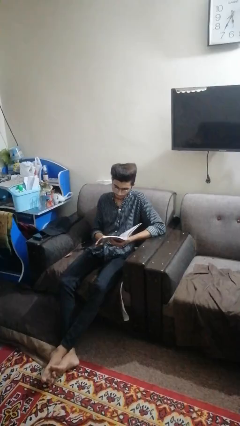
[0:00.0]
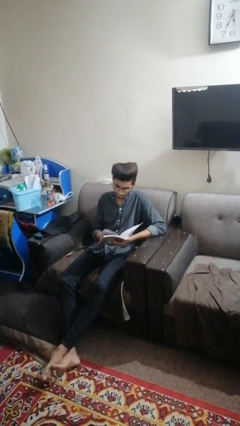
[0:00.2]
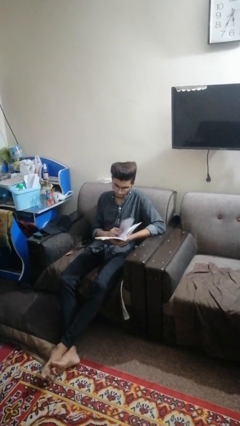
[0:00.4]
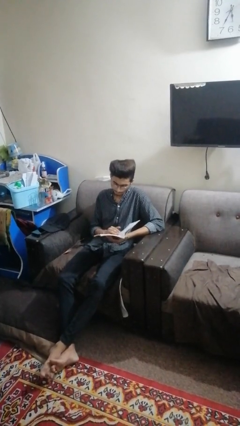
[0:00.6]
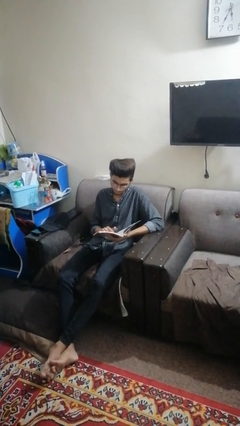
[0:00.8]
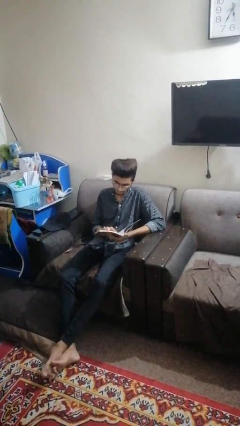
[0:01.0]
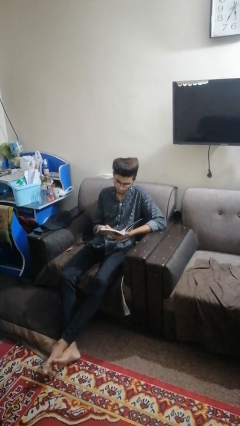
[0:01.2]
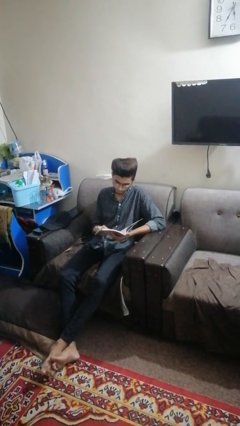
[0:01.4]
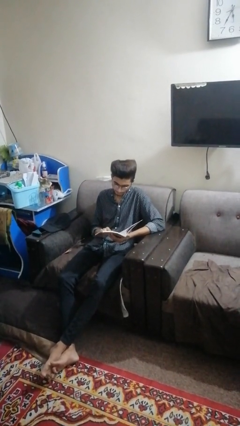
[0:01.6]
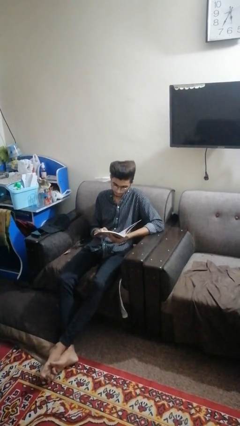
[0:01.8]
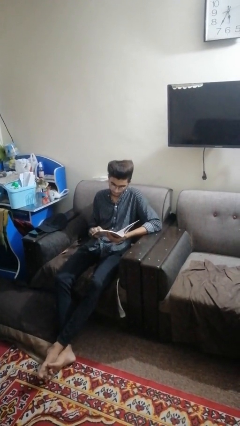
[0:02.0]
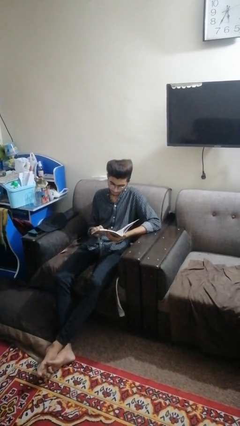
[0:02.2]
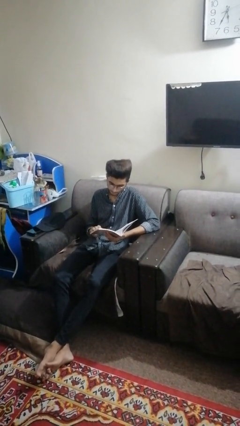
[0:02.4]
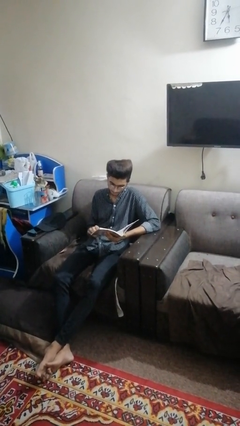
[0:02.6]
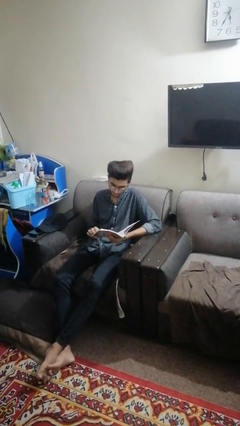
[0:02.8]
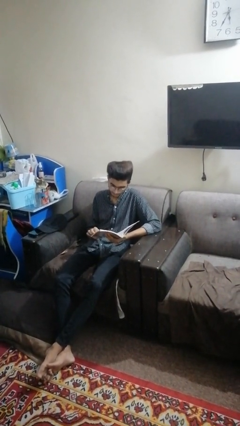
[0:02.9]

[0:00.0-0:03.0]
person reads book

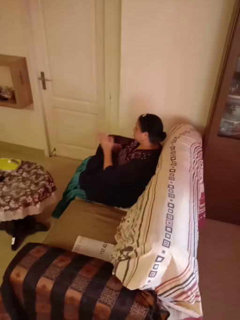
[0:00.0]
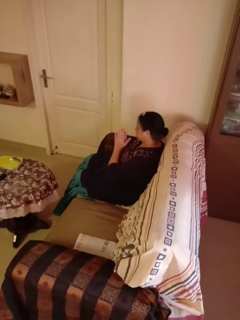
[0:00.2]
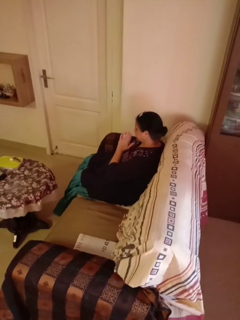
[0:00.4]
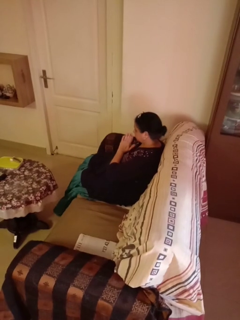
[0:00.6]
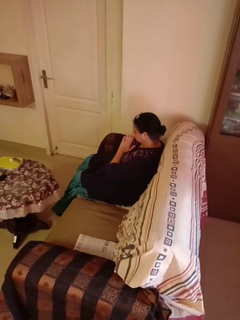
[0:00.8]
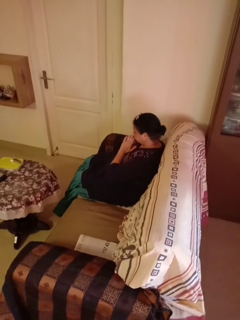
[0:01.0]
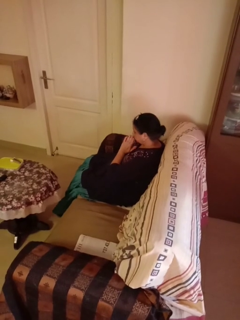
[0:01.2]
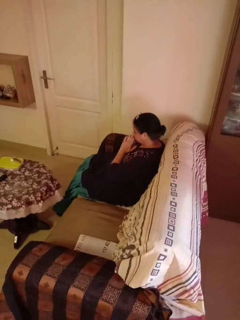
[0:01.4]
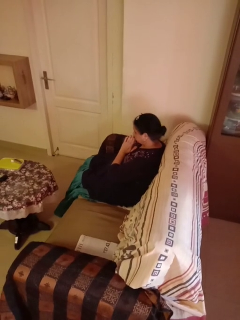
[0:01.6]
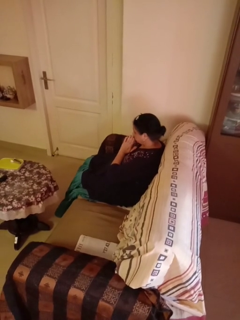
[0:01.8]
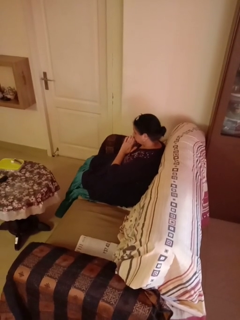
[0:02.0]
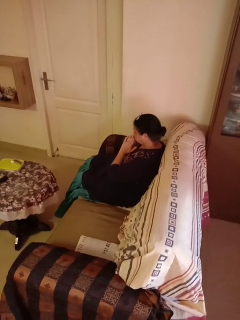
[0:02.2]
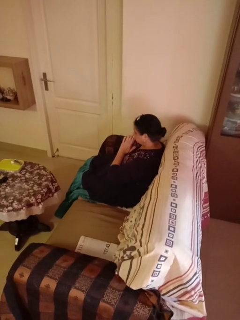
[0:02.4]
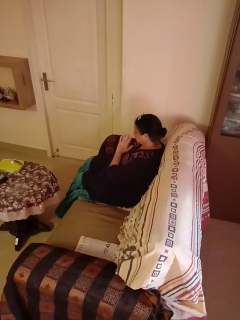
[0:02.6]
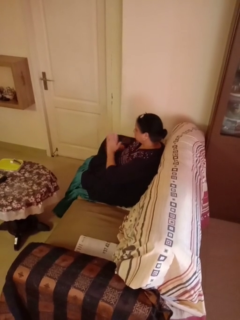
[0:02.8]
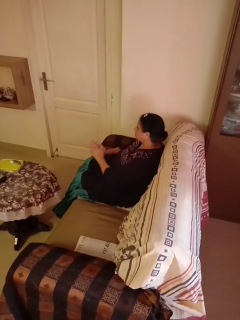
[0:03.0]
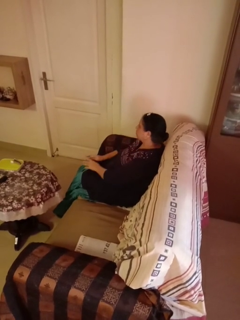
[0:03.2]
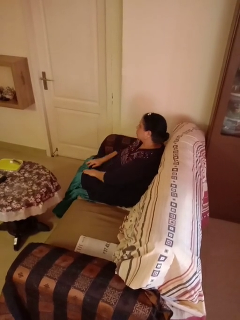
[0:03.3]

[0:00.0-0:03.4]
person prays

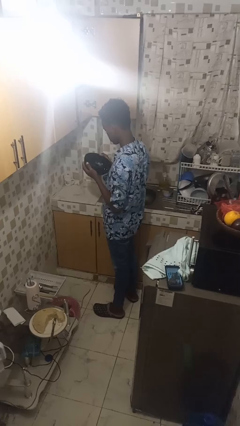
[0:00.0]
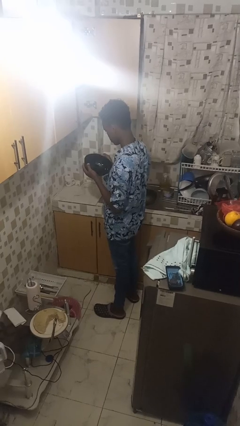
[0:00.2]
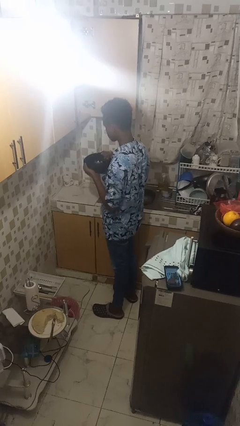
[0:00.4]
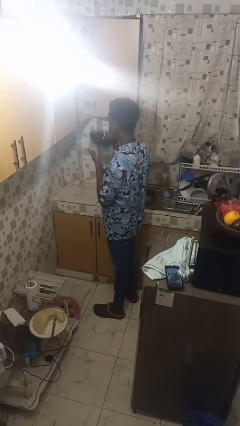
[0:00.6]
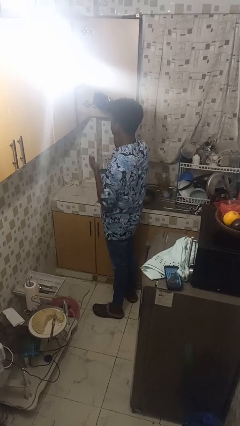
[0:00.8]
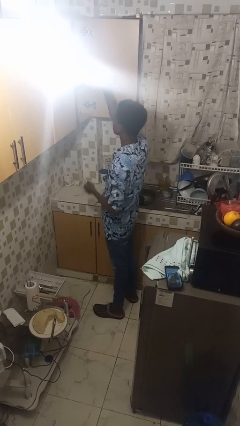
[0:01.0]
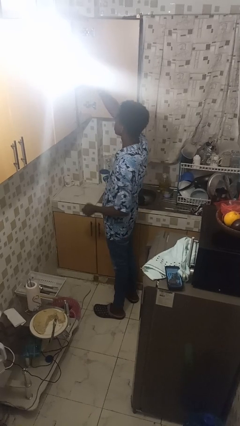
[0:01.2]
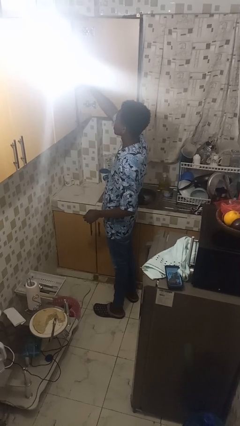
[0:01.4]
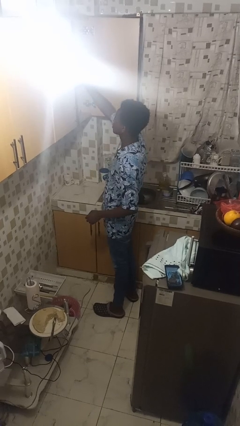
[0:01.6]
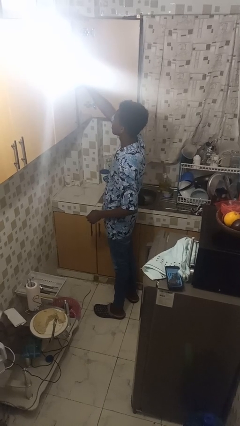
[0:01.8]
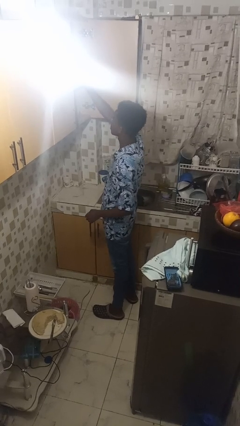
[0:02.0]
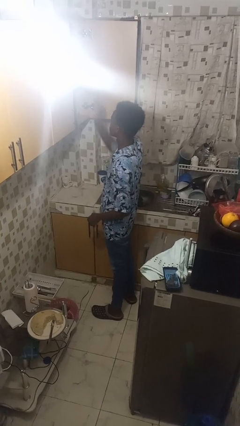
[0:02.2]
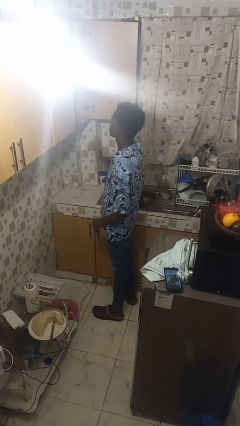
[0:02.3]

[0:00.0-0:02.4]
person puts down object into cabinet

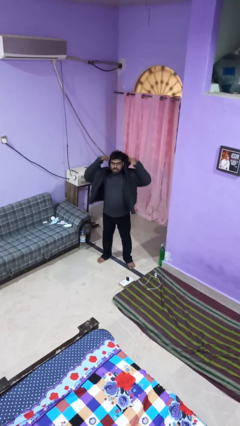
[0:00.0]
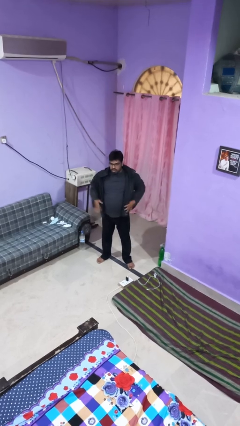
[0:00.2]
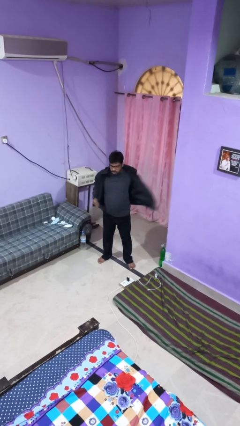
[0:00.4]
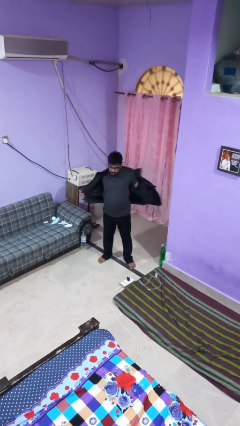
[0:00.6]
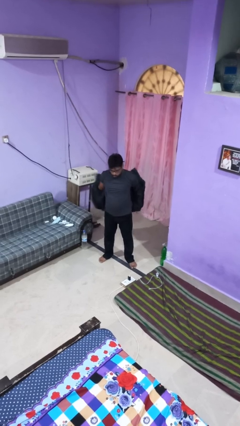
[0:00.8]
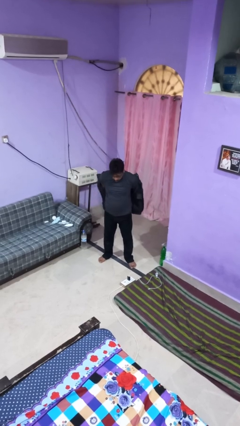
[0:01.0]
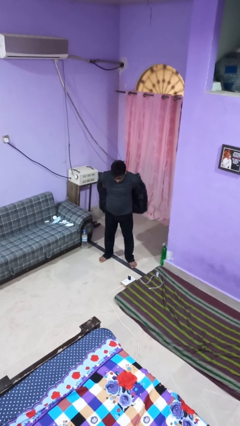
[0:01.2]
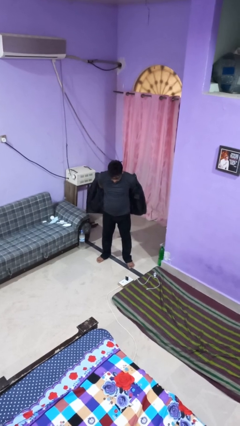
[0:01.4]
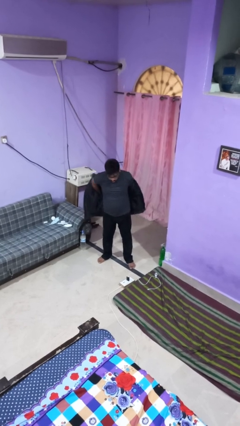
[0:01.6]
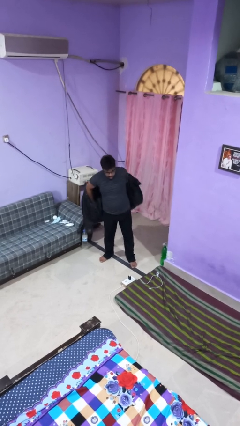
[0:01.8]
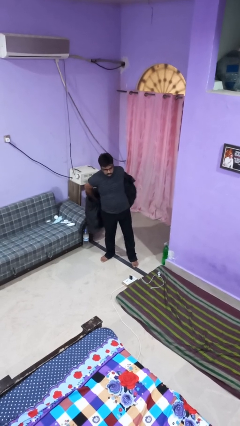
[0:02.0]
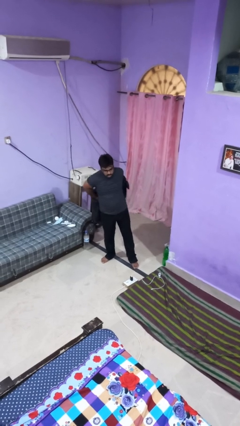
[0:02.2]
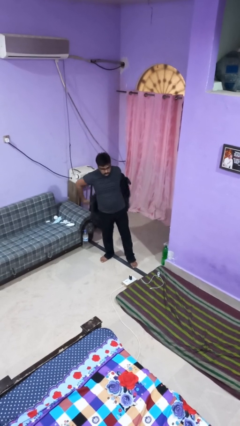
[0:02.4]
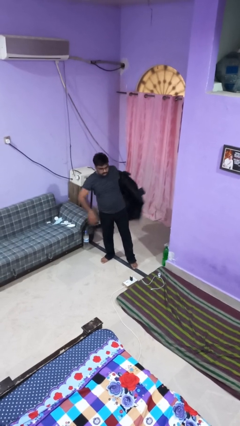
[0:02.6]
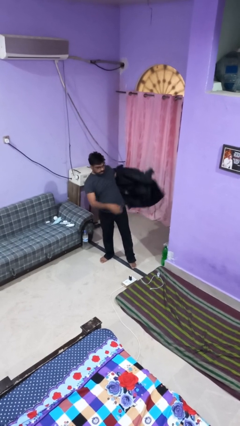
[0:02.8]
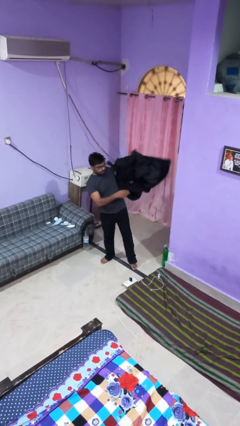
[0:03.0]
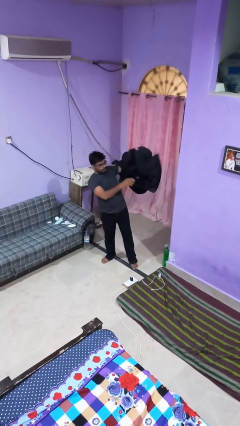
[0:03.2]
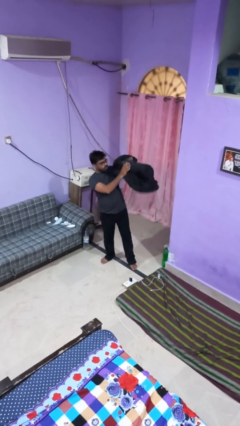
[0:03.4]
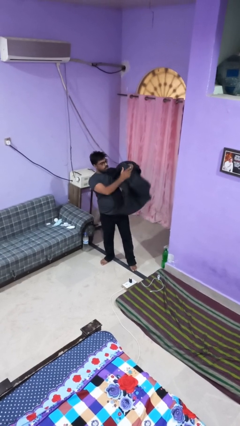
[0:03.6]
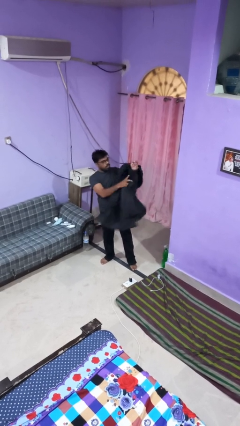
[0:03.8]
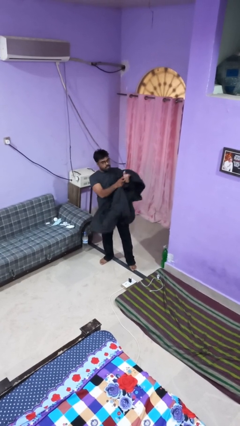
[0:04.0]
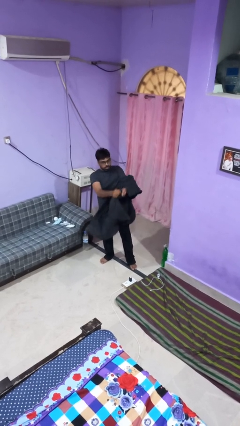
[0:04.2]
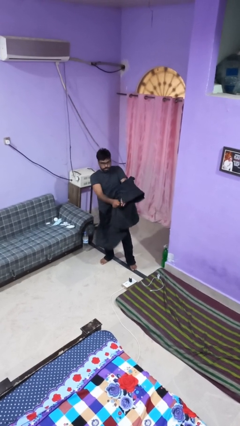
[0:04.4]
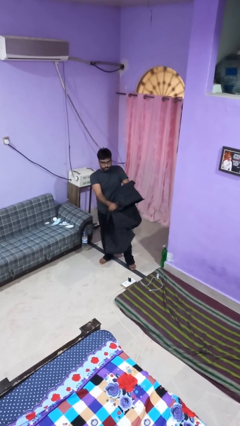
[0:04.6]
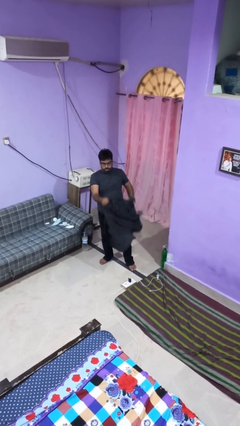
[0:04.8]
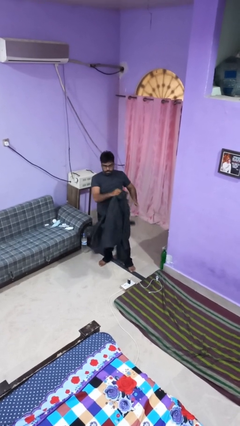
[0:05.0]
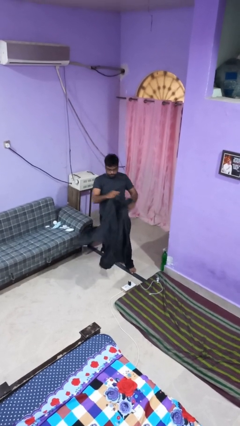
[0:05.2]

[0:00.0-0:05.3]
person takes off hoodie

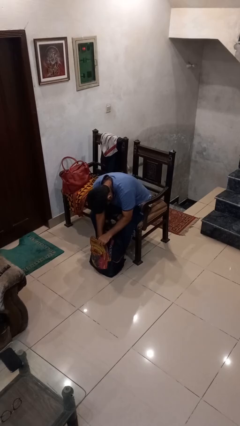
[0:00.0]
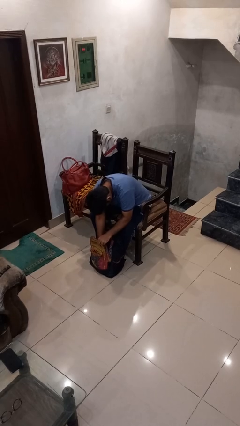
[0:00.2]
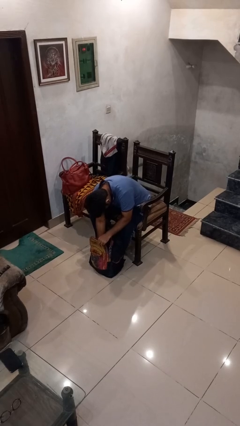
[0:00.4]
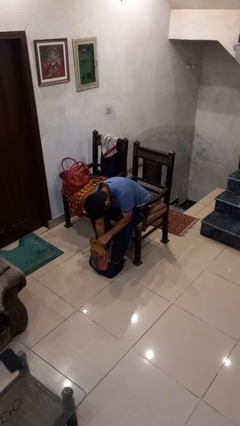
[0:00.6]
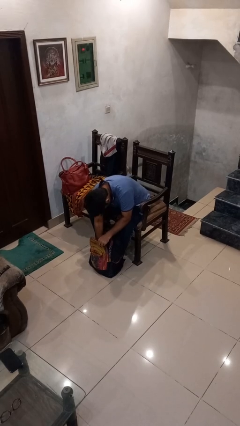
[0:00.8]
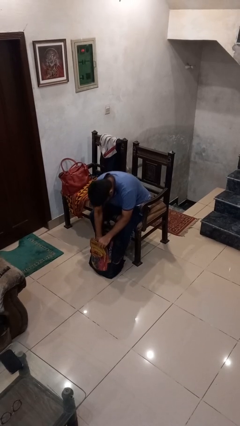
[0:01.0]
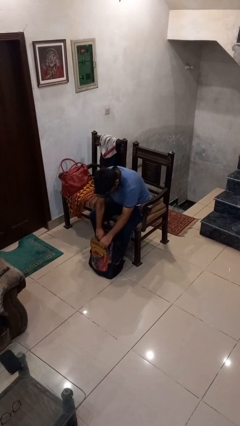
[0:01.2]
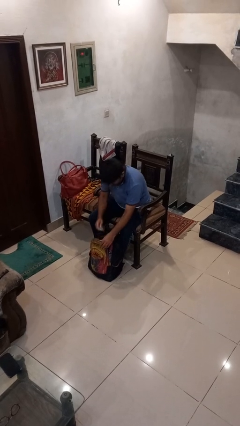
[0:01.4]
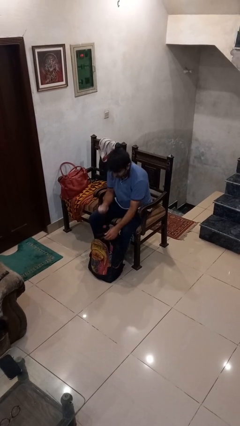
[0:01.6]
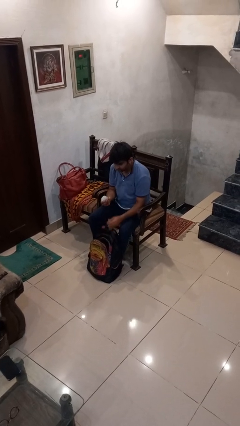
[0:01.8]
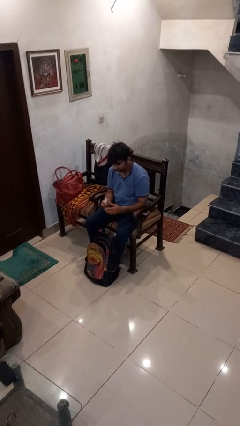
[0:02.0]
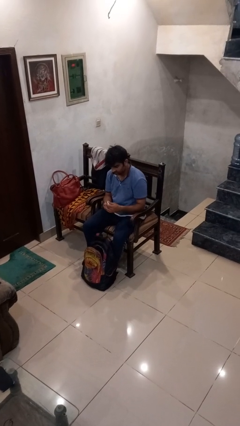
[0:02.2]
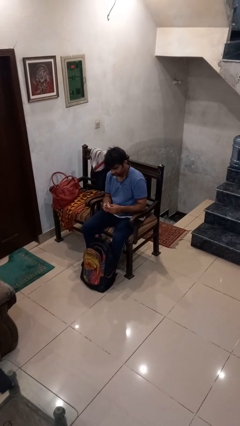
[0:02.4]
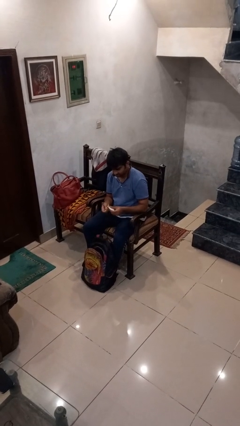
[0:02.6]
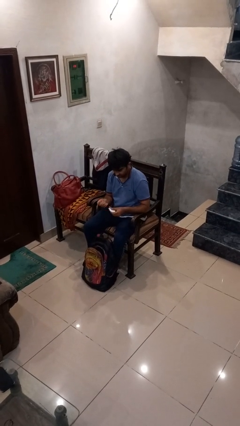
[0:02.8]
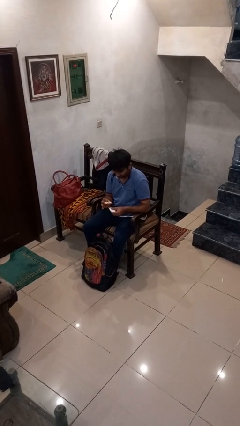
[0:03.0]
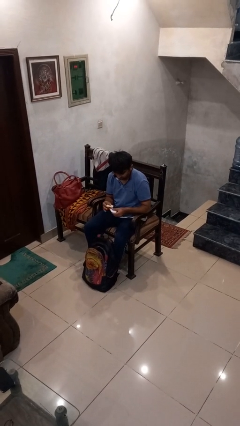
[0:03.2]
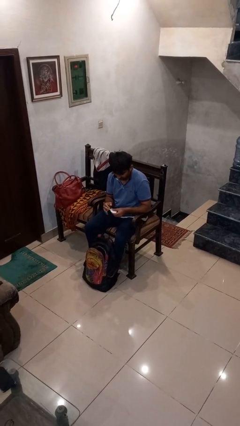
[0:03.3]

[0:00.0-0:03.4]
person takes object from backpack

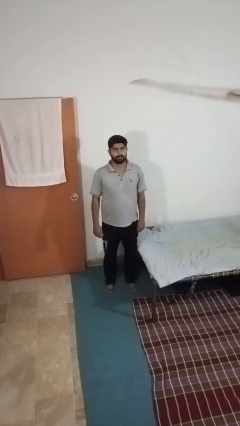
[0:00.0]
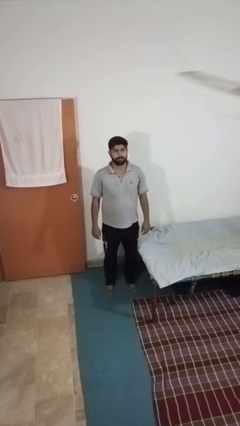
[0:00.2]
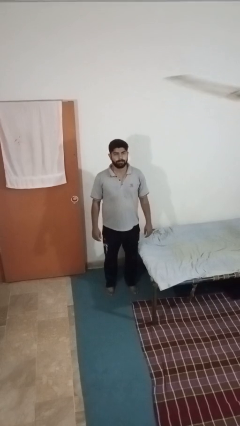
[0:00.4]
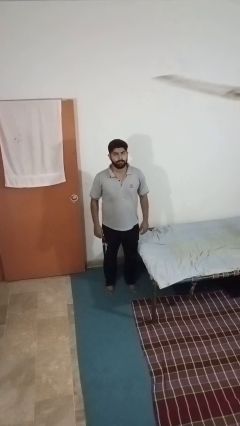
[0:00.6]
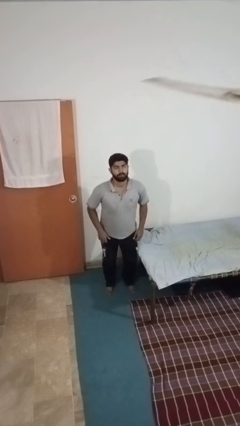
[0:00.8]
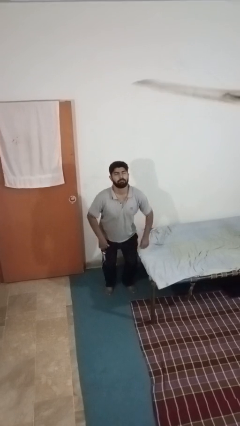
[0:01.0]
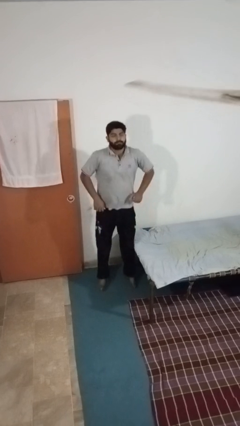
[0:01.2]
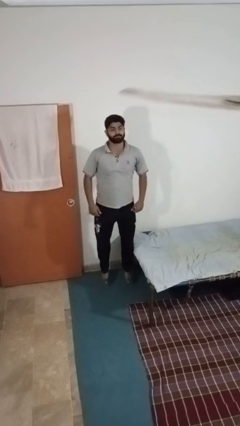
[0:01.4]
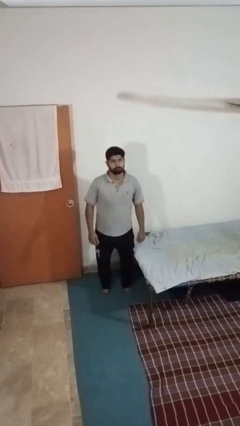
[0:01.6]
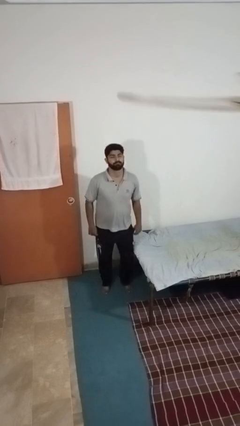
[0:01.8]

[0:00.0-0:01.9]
person jumps
